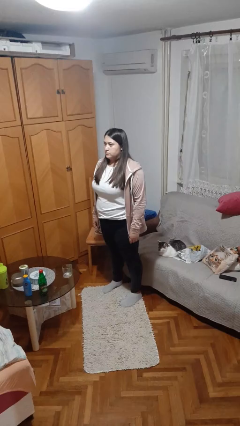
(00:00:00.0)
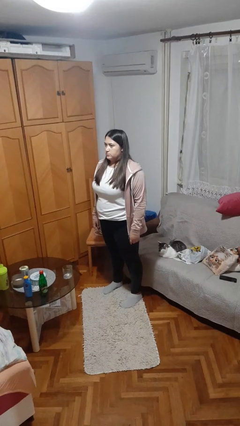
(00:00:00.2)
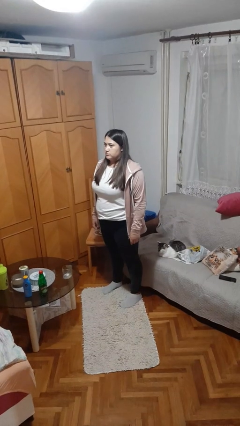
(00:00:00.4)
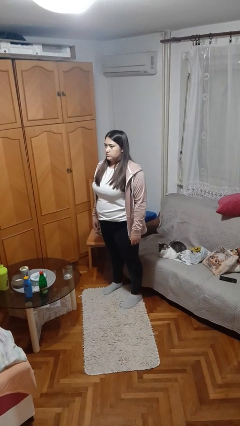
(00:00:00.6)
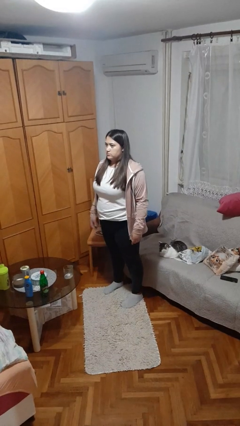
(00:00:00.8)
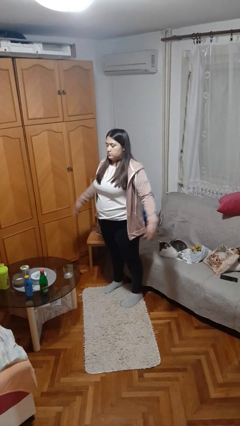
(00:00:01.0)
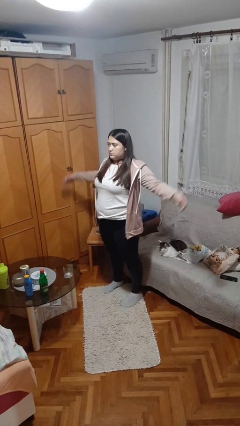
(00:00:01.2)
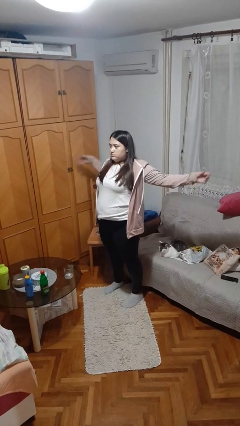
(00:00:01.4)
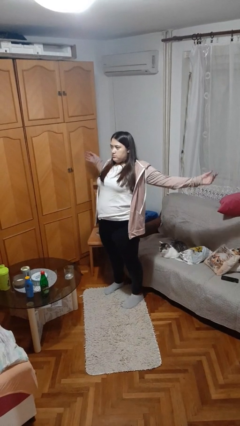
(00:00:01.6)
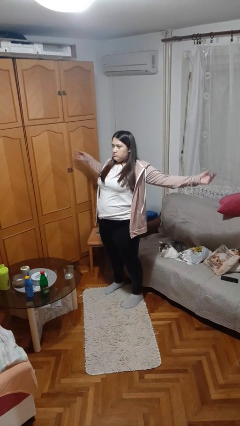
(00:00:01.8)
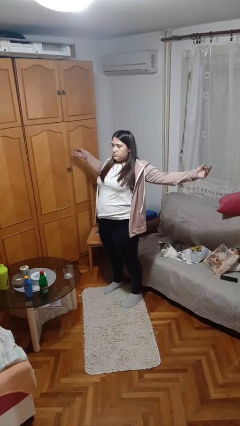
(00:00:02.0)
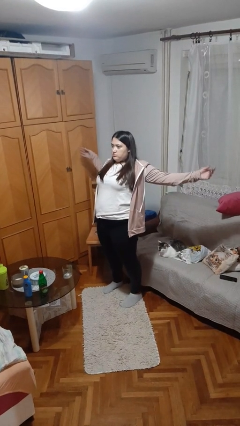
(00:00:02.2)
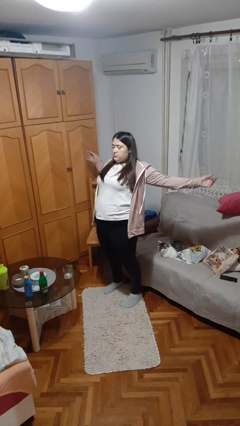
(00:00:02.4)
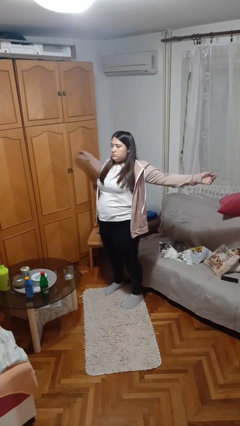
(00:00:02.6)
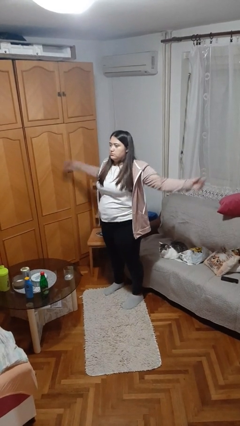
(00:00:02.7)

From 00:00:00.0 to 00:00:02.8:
person stretches arms to side

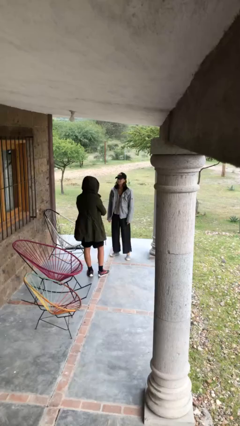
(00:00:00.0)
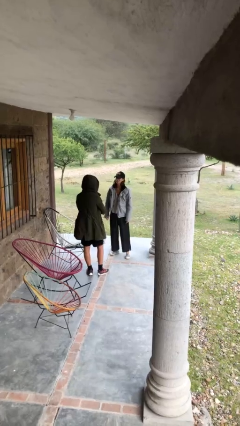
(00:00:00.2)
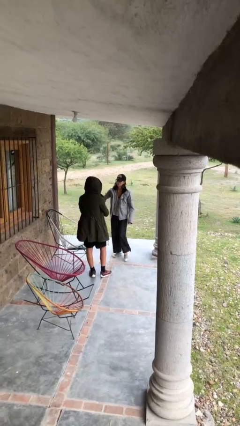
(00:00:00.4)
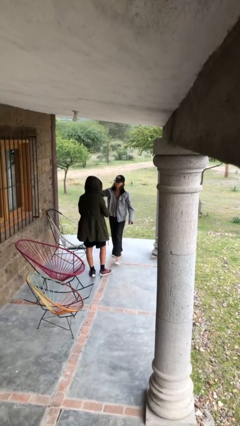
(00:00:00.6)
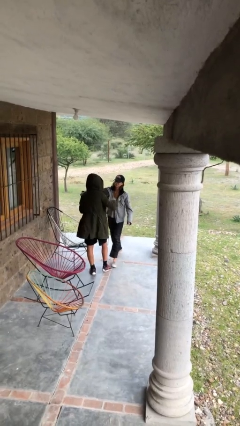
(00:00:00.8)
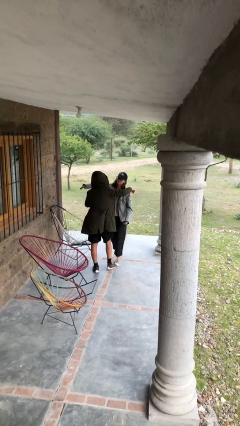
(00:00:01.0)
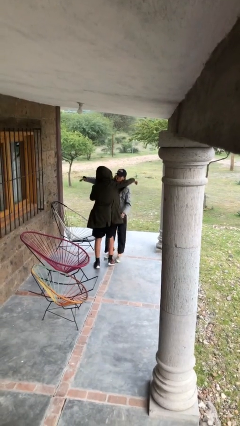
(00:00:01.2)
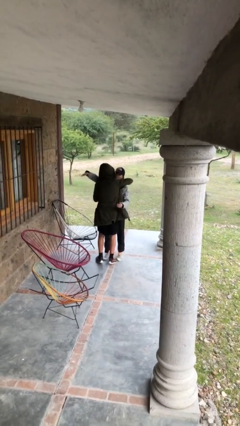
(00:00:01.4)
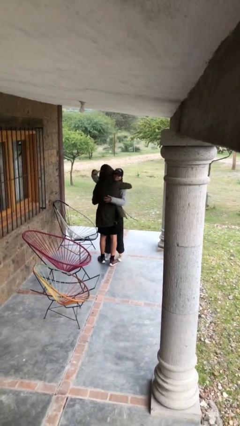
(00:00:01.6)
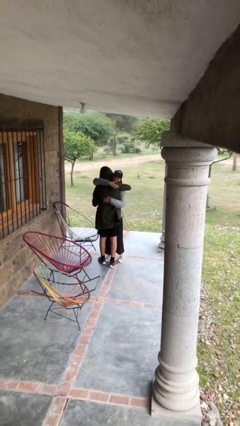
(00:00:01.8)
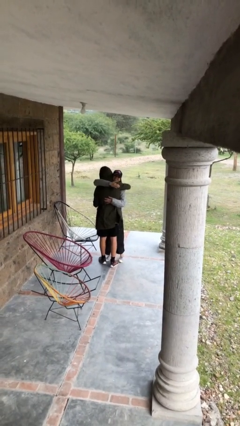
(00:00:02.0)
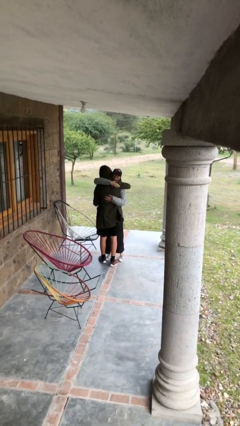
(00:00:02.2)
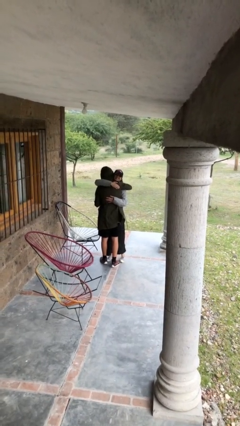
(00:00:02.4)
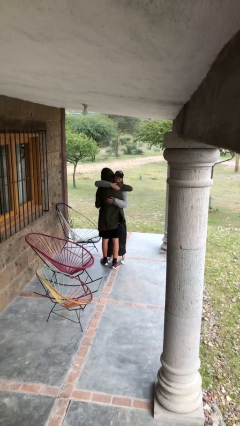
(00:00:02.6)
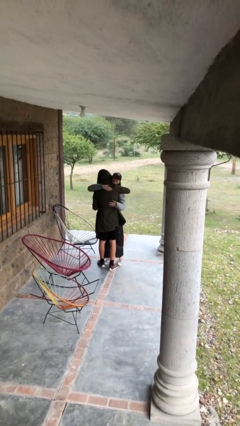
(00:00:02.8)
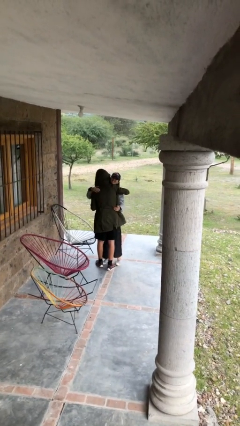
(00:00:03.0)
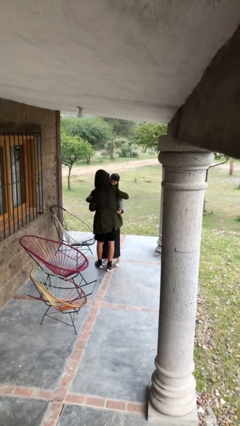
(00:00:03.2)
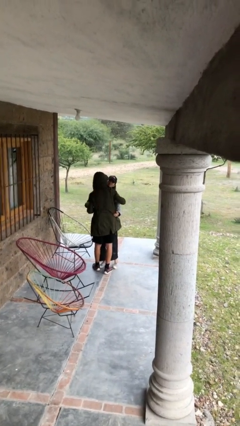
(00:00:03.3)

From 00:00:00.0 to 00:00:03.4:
person embraces person

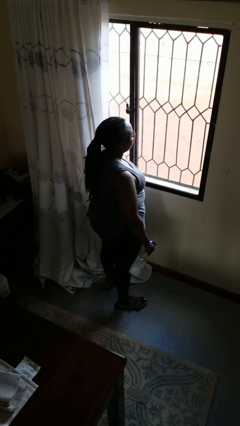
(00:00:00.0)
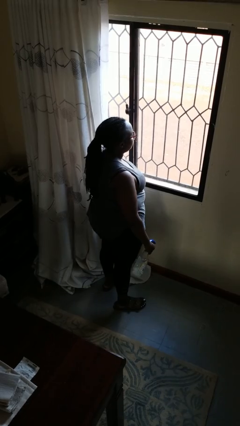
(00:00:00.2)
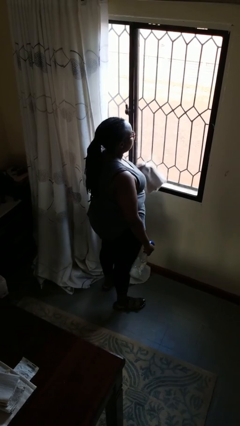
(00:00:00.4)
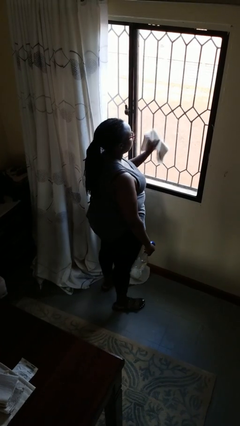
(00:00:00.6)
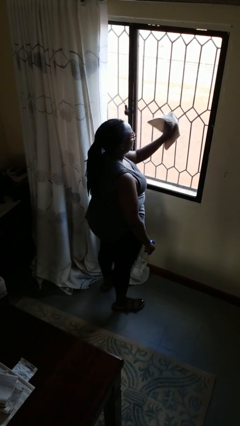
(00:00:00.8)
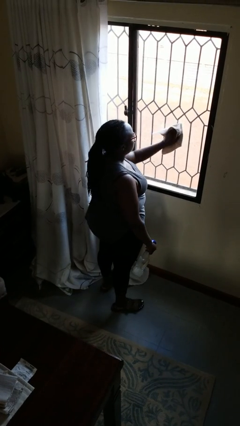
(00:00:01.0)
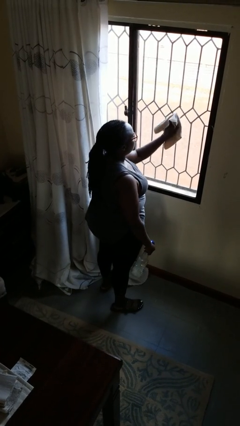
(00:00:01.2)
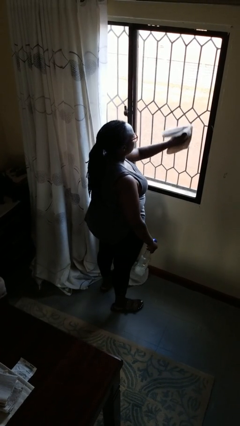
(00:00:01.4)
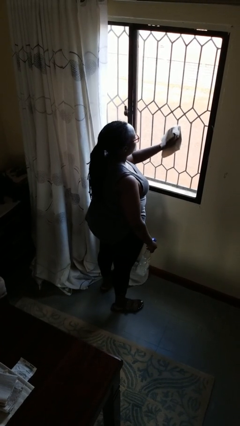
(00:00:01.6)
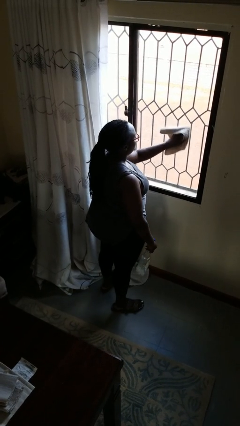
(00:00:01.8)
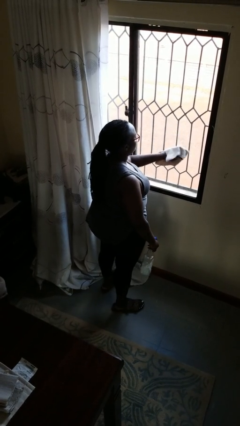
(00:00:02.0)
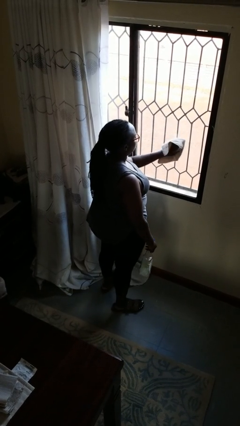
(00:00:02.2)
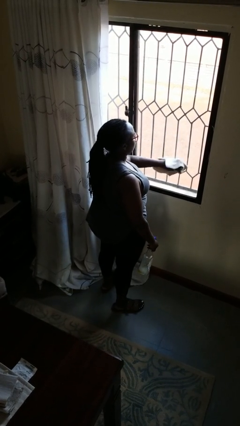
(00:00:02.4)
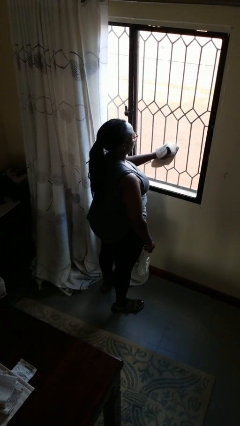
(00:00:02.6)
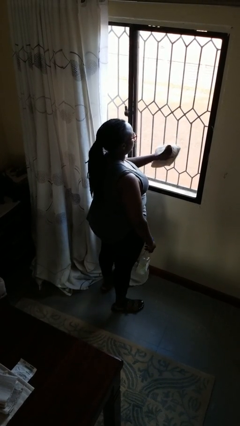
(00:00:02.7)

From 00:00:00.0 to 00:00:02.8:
person washes window

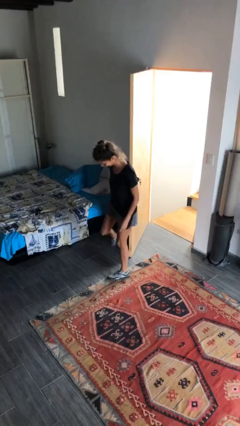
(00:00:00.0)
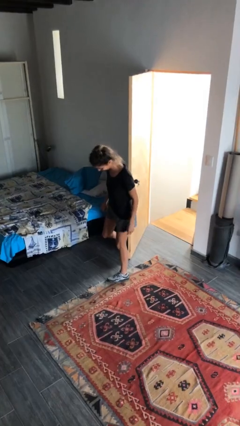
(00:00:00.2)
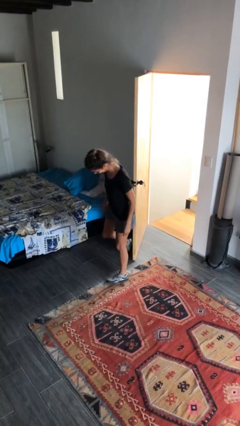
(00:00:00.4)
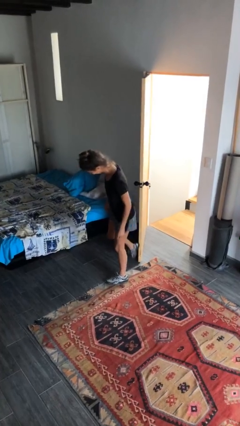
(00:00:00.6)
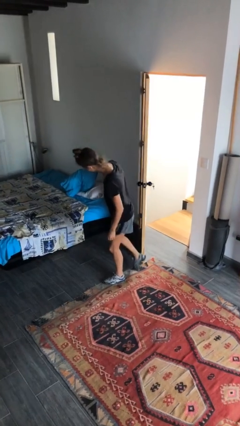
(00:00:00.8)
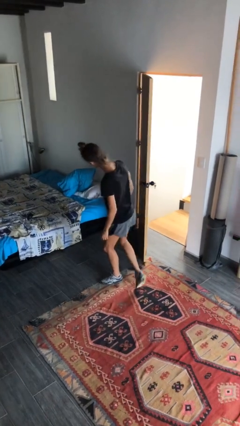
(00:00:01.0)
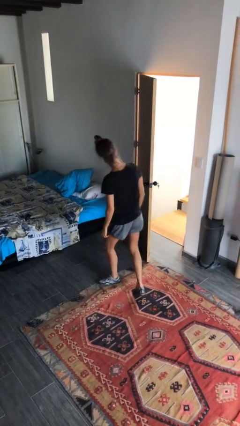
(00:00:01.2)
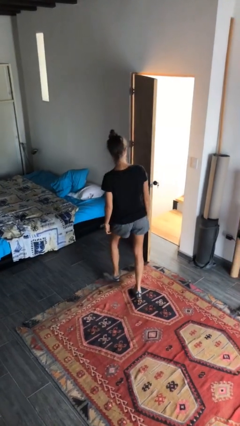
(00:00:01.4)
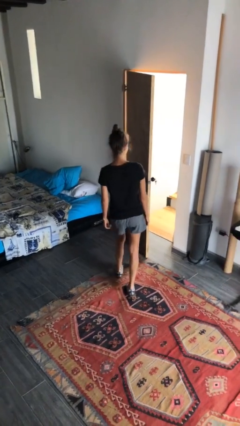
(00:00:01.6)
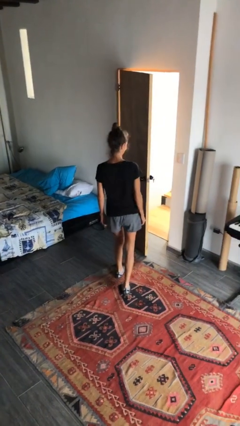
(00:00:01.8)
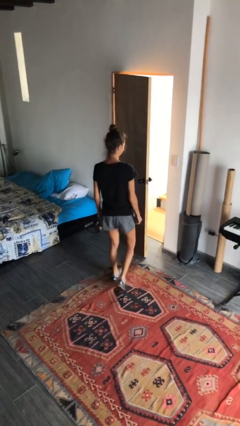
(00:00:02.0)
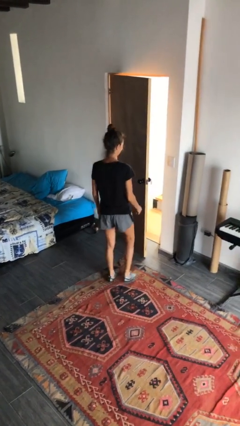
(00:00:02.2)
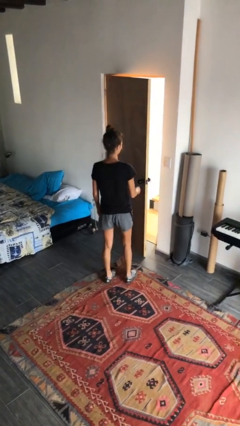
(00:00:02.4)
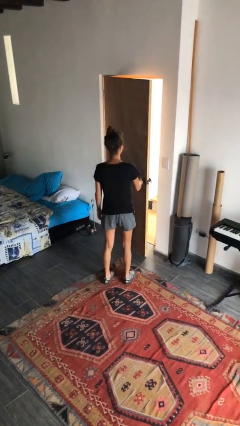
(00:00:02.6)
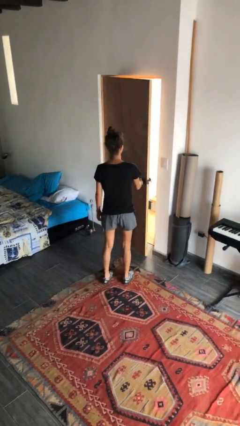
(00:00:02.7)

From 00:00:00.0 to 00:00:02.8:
person closes door with foot

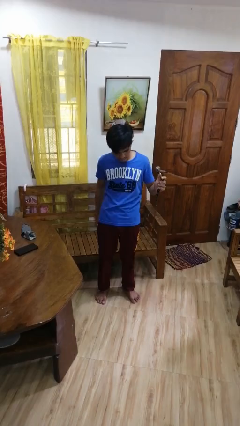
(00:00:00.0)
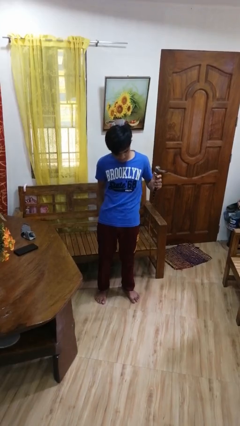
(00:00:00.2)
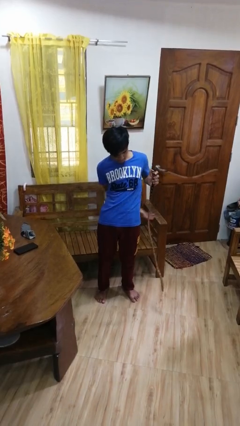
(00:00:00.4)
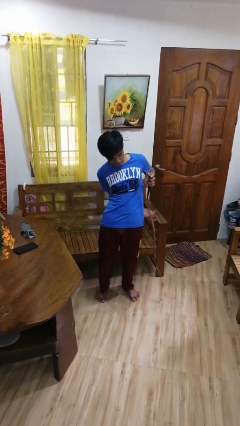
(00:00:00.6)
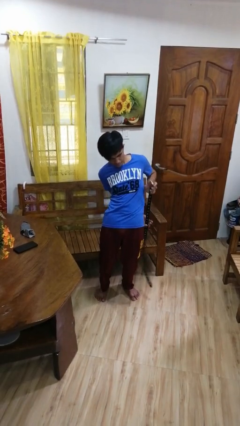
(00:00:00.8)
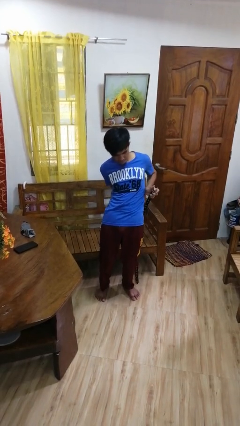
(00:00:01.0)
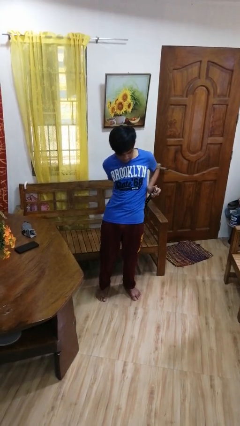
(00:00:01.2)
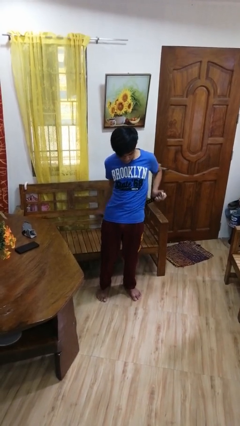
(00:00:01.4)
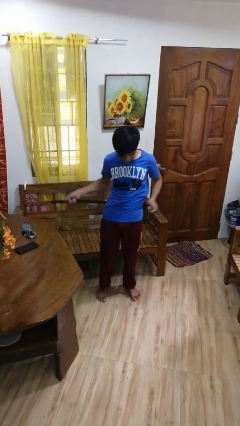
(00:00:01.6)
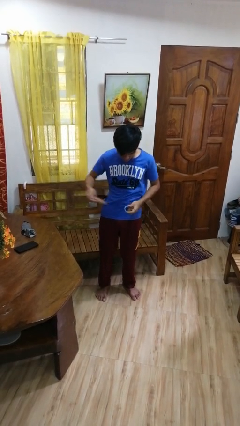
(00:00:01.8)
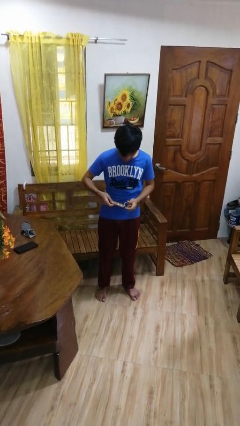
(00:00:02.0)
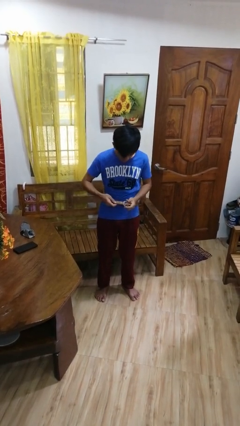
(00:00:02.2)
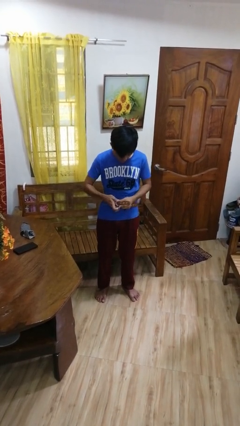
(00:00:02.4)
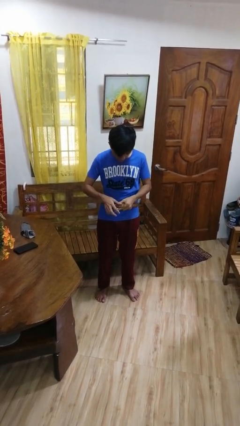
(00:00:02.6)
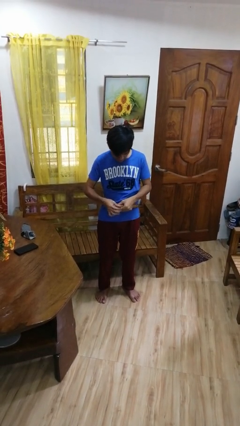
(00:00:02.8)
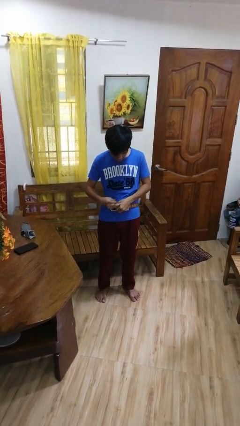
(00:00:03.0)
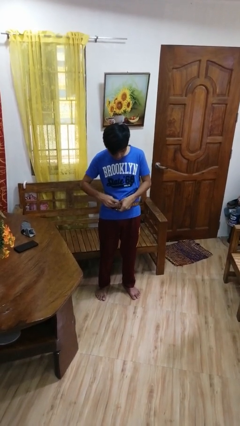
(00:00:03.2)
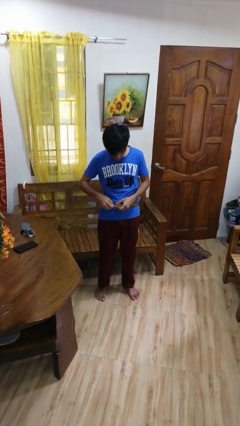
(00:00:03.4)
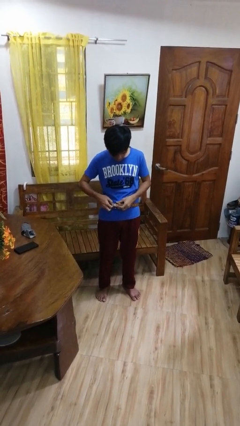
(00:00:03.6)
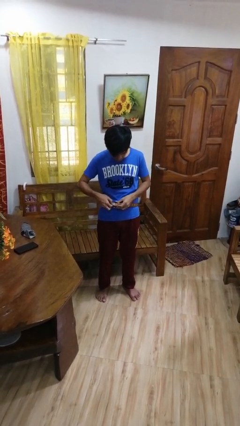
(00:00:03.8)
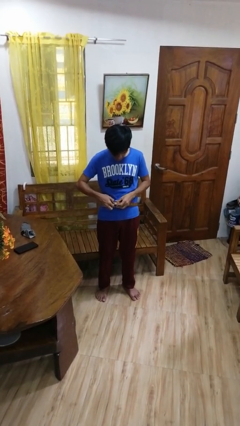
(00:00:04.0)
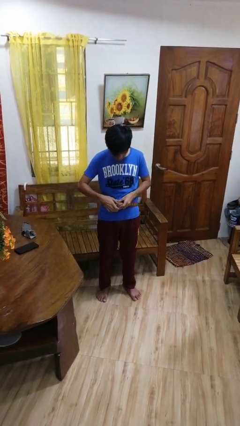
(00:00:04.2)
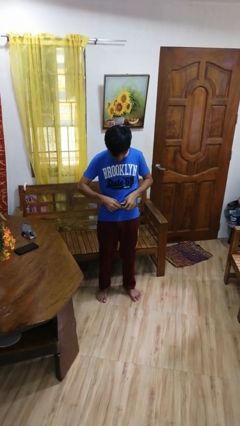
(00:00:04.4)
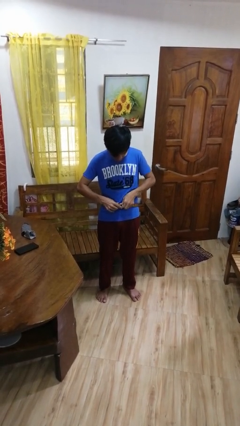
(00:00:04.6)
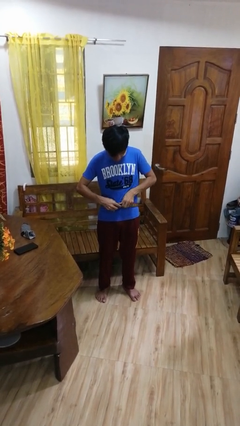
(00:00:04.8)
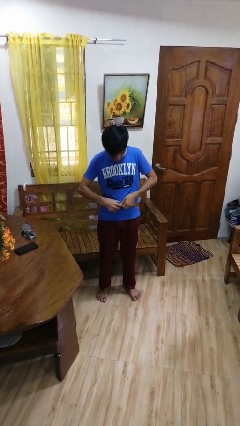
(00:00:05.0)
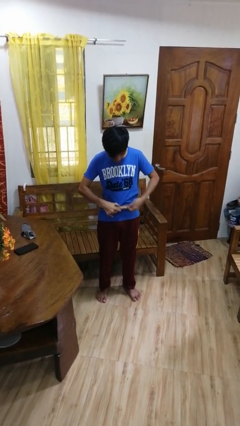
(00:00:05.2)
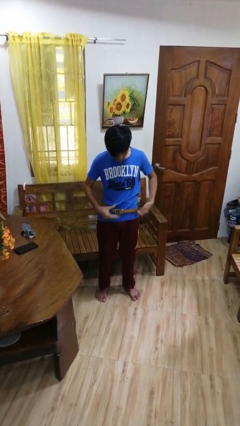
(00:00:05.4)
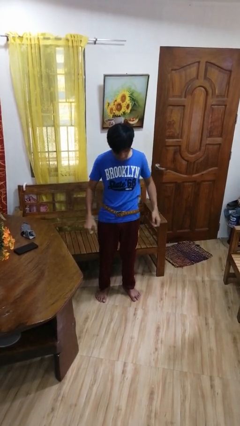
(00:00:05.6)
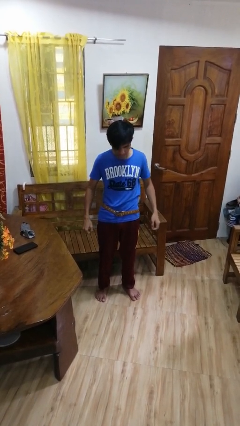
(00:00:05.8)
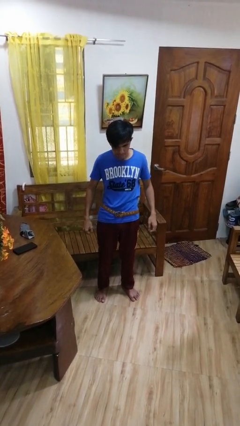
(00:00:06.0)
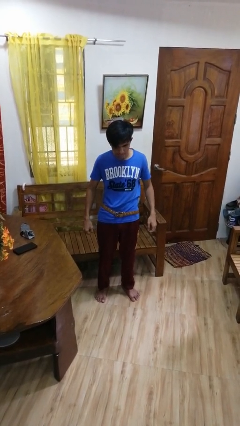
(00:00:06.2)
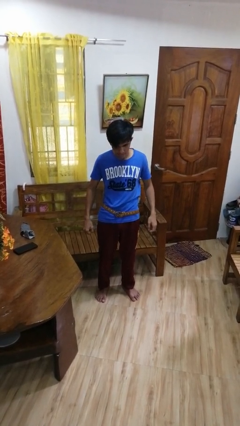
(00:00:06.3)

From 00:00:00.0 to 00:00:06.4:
person puts on belt
